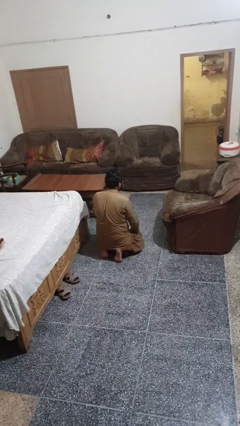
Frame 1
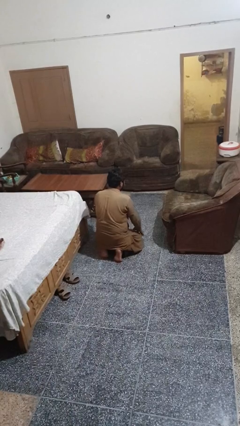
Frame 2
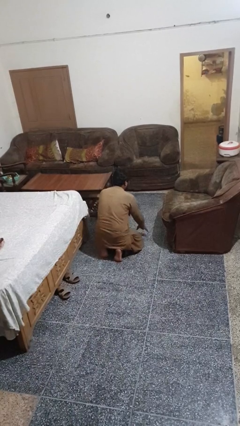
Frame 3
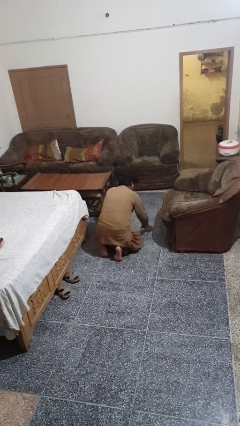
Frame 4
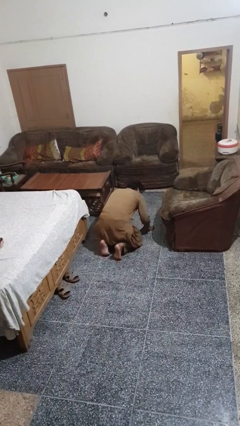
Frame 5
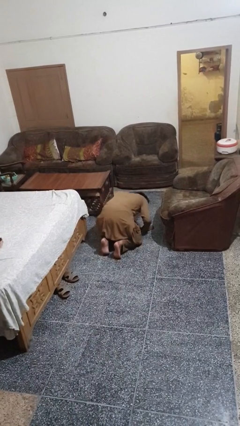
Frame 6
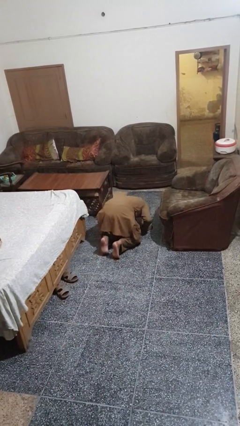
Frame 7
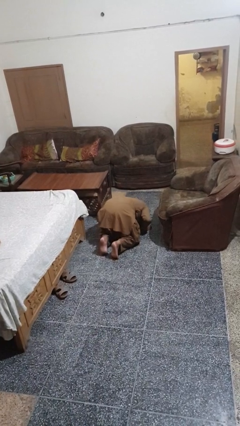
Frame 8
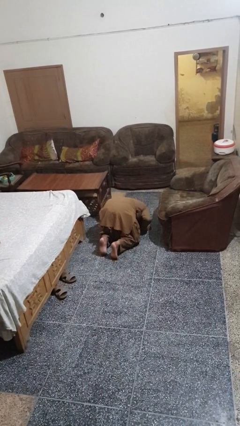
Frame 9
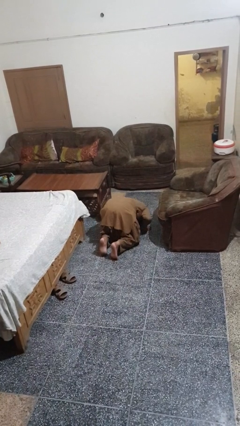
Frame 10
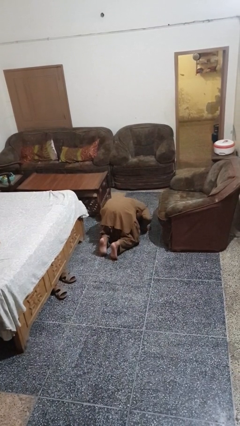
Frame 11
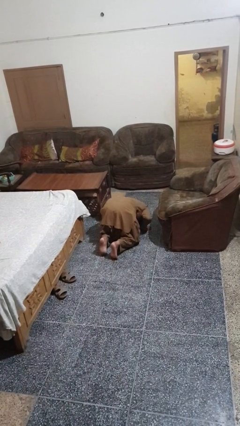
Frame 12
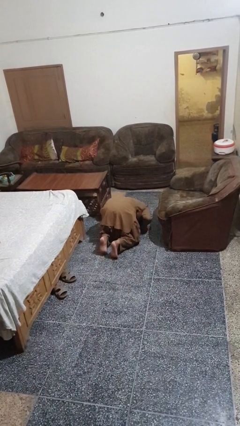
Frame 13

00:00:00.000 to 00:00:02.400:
person searches under couch

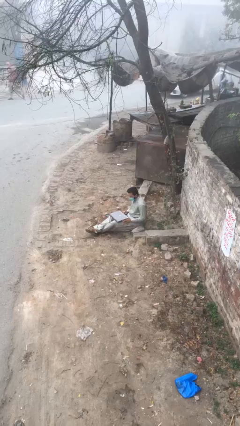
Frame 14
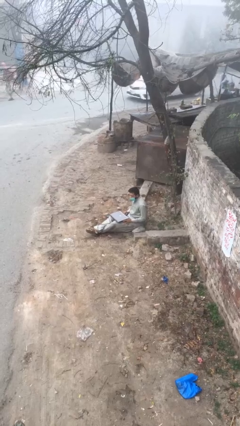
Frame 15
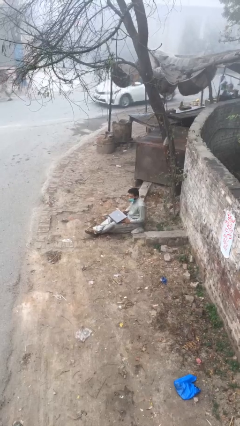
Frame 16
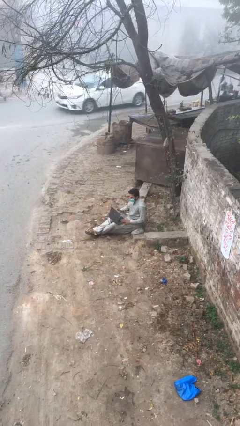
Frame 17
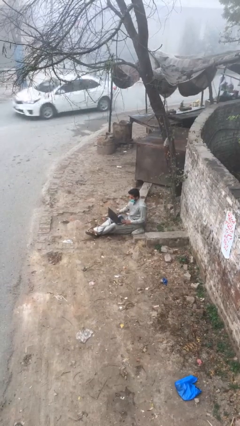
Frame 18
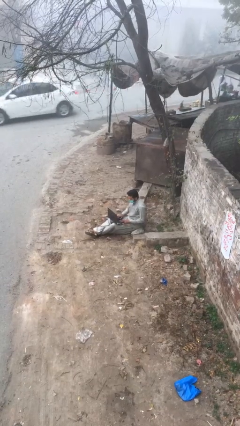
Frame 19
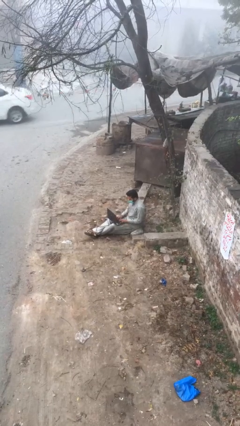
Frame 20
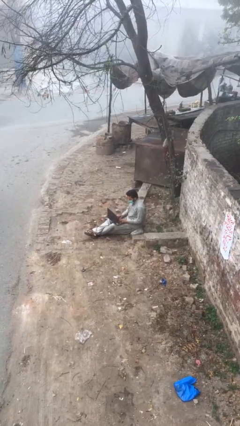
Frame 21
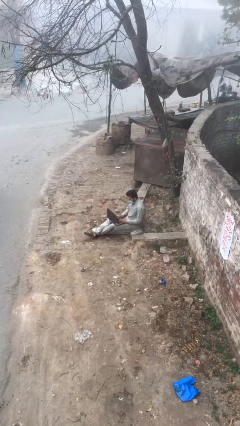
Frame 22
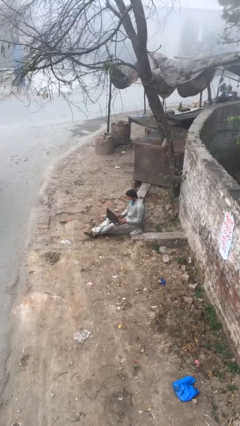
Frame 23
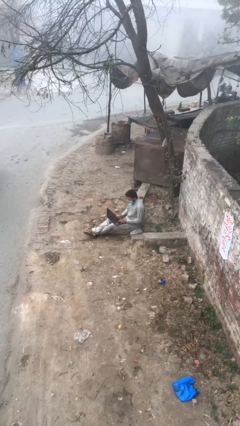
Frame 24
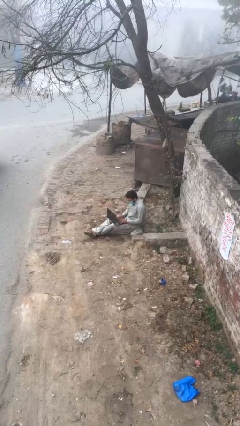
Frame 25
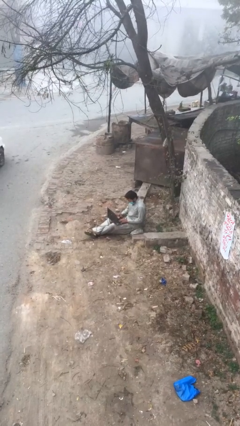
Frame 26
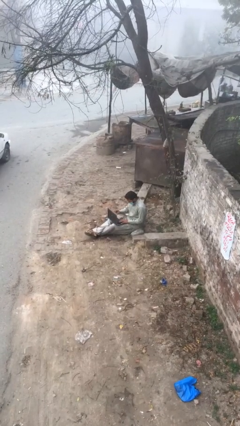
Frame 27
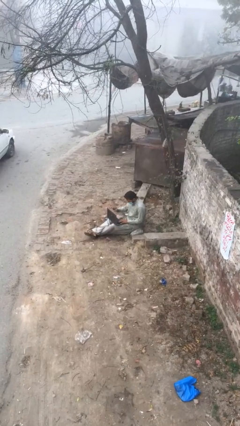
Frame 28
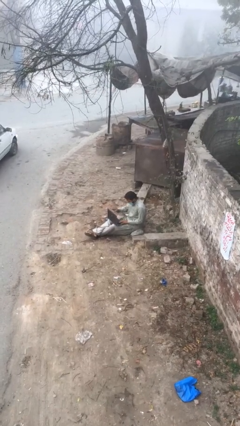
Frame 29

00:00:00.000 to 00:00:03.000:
person interacts with laptop

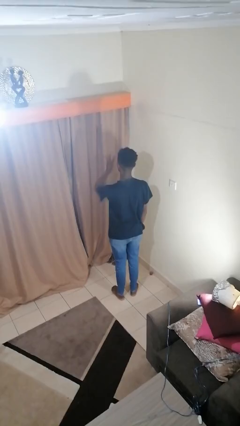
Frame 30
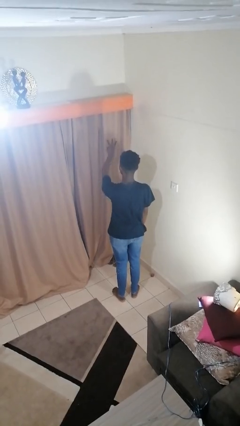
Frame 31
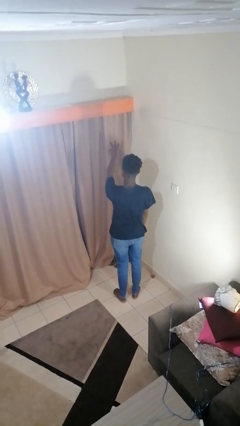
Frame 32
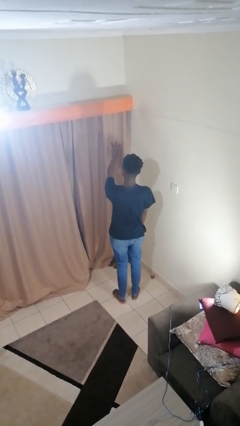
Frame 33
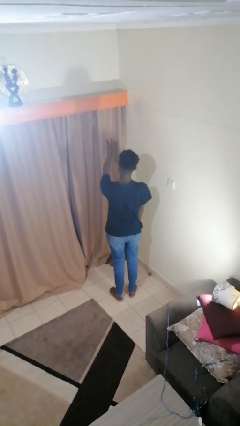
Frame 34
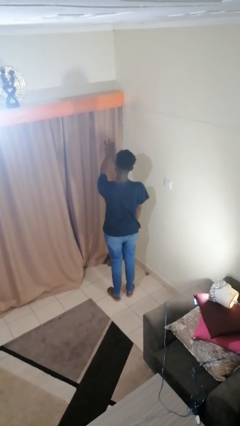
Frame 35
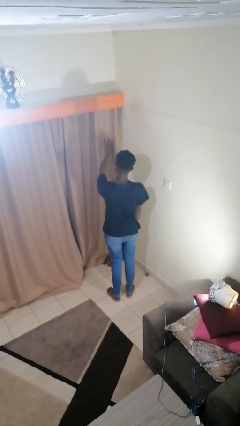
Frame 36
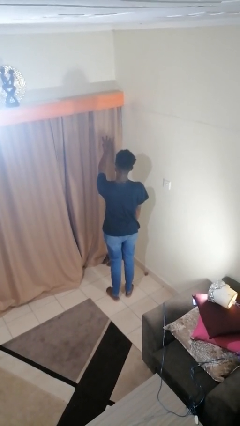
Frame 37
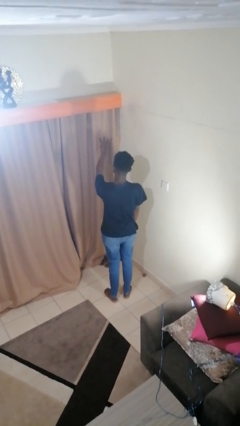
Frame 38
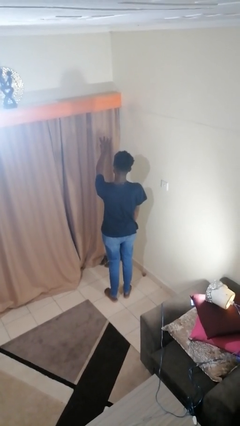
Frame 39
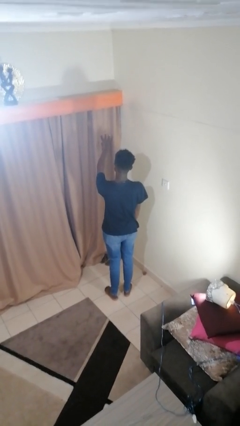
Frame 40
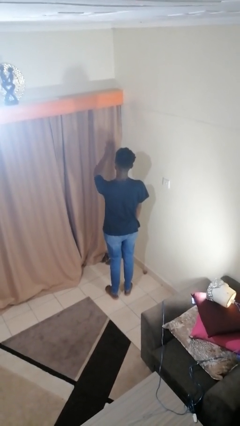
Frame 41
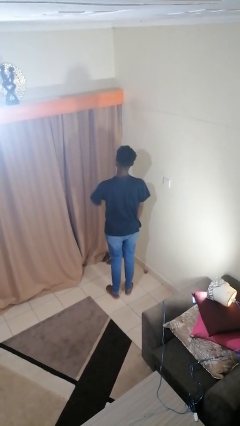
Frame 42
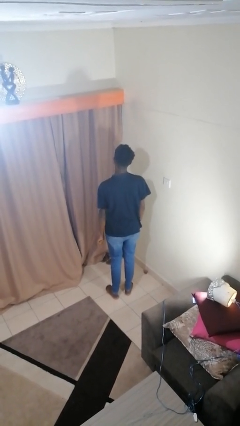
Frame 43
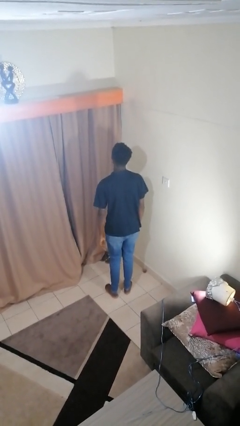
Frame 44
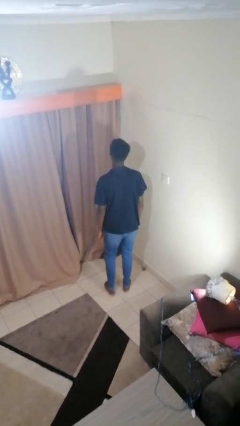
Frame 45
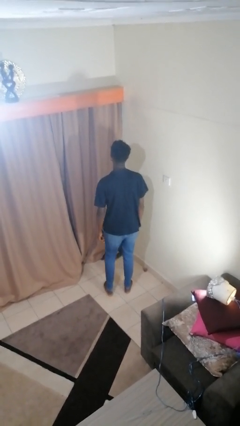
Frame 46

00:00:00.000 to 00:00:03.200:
person gestures number three

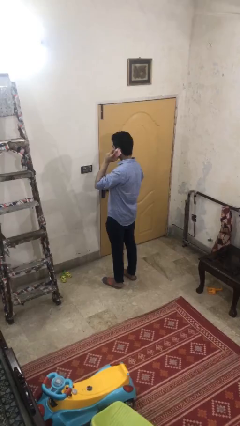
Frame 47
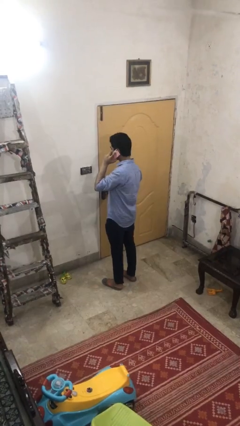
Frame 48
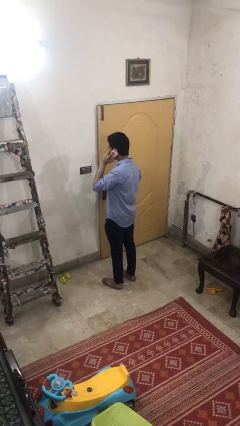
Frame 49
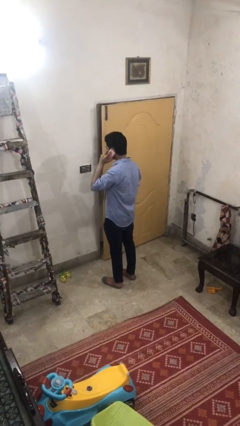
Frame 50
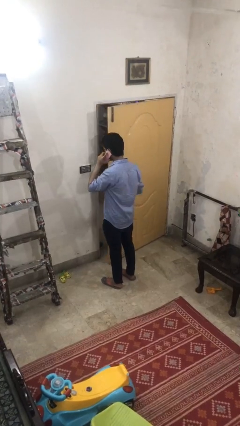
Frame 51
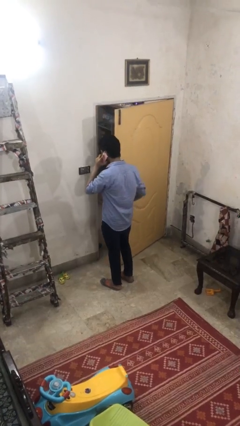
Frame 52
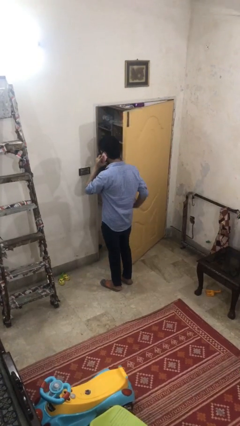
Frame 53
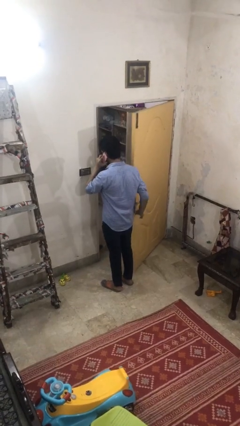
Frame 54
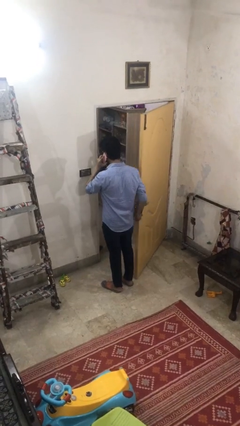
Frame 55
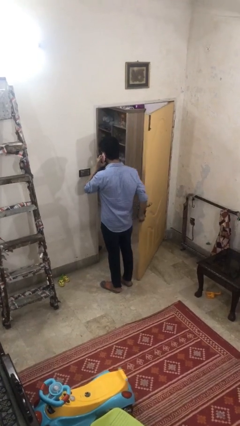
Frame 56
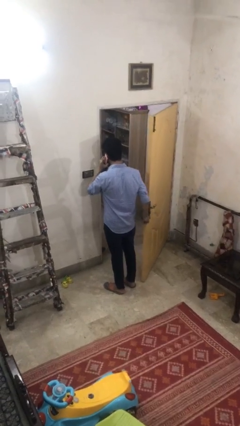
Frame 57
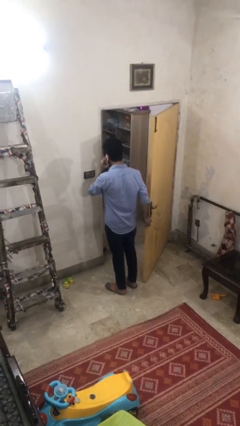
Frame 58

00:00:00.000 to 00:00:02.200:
person opens facility door

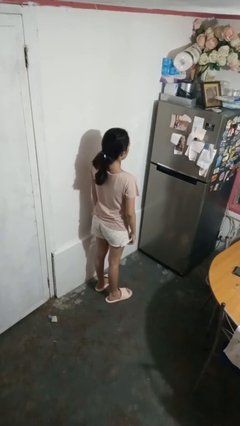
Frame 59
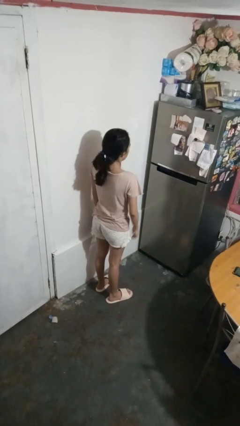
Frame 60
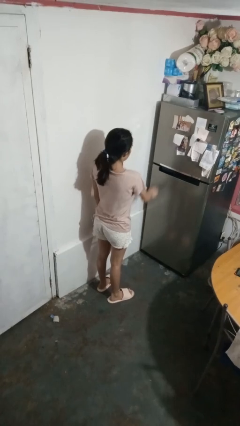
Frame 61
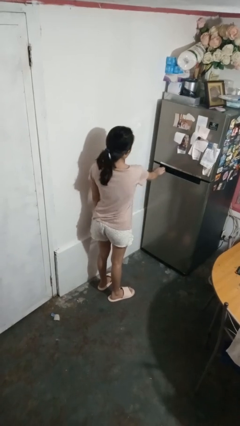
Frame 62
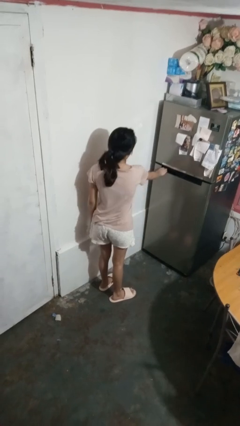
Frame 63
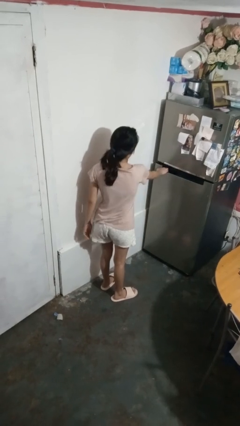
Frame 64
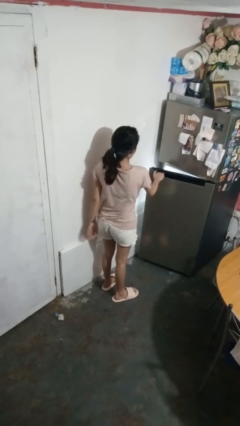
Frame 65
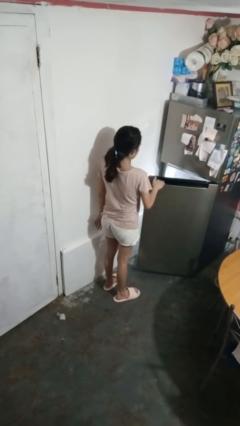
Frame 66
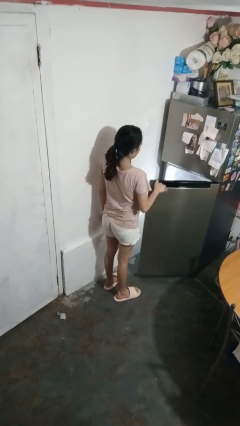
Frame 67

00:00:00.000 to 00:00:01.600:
person opens refrigerator

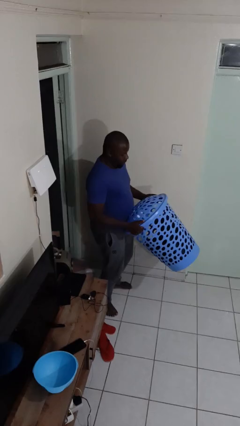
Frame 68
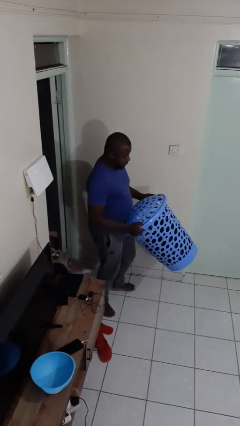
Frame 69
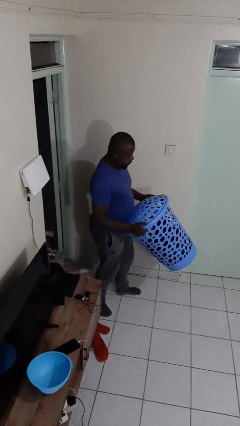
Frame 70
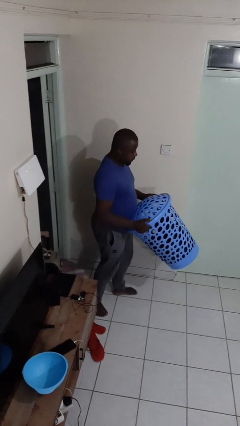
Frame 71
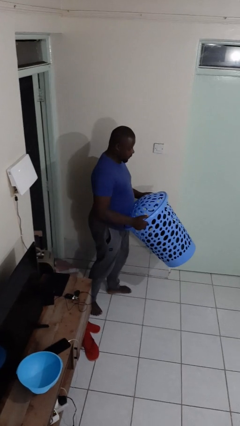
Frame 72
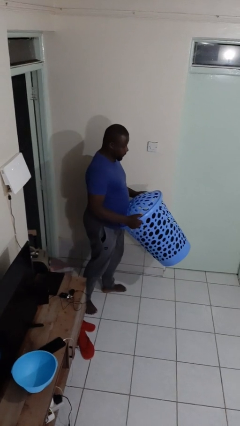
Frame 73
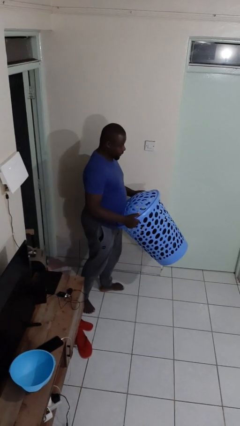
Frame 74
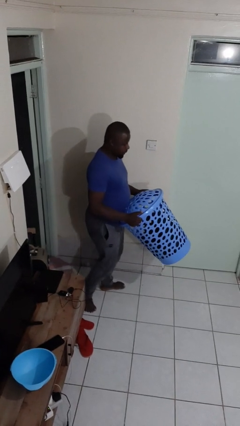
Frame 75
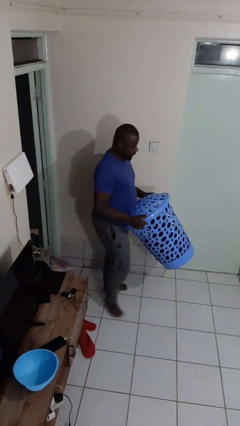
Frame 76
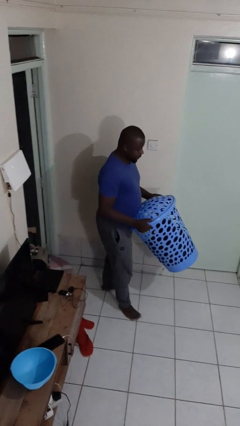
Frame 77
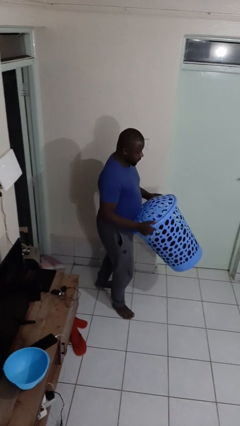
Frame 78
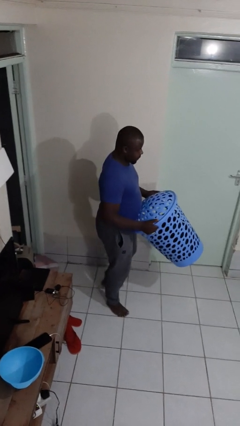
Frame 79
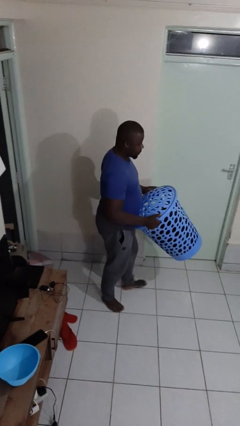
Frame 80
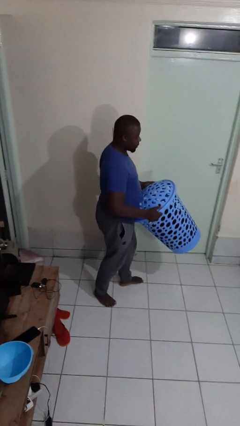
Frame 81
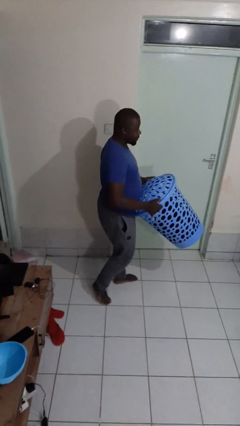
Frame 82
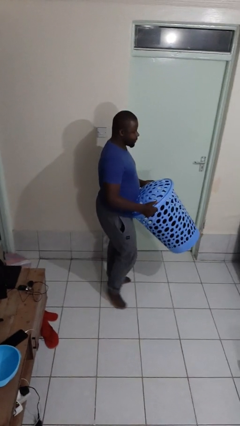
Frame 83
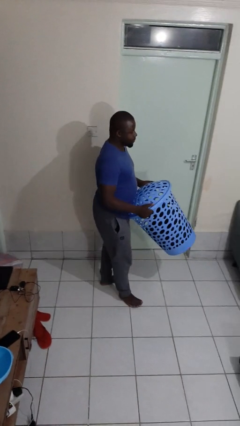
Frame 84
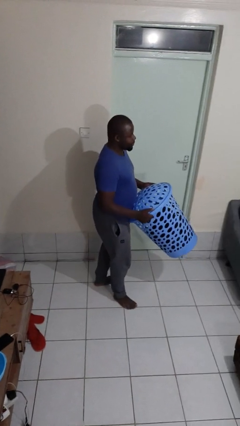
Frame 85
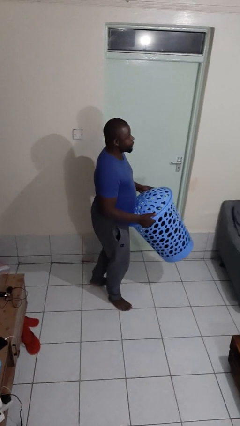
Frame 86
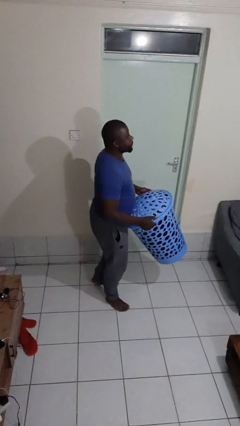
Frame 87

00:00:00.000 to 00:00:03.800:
person carries laundry basket

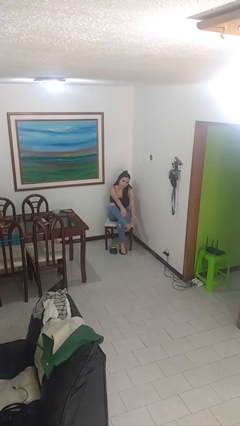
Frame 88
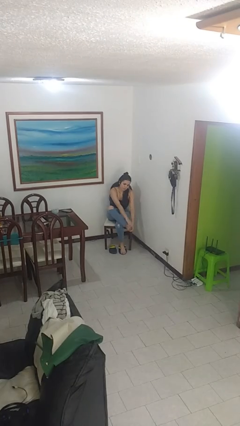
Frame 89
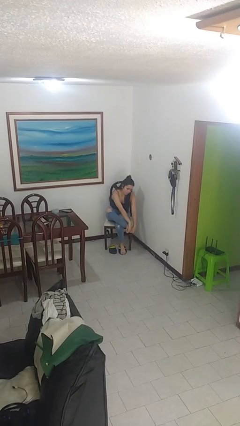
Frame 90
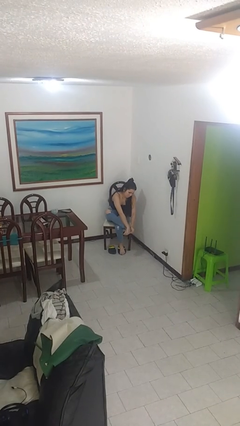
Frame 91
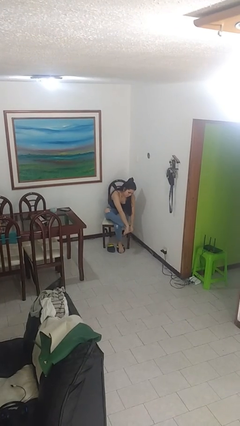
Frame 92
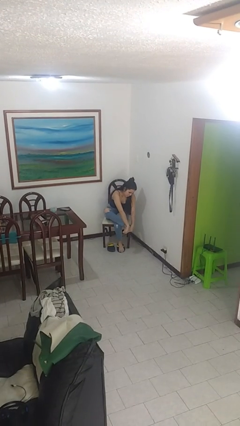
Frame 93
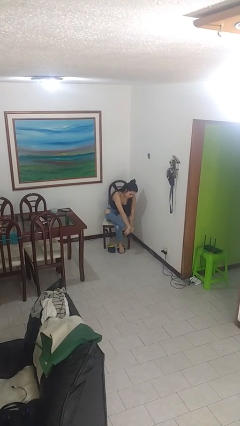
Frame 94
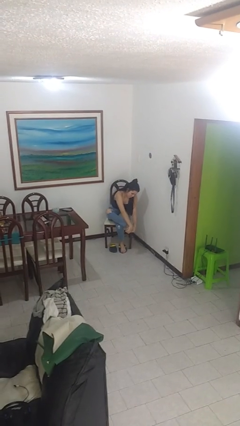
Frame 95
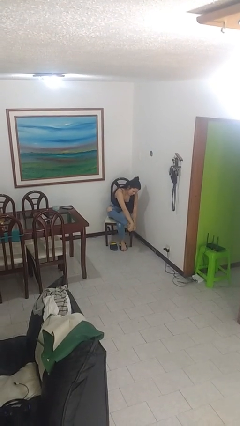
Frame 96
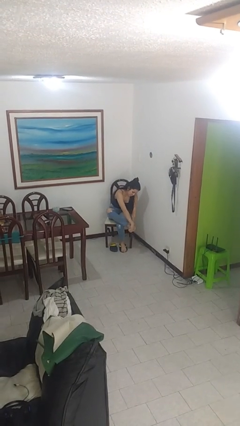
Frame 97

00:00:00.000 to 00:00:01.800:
person rubs foot
